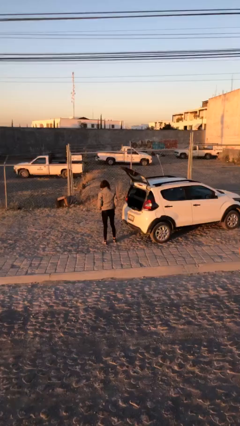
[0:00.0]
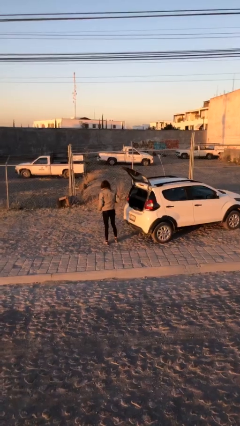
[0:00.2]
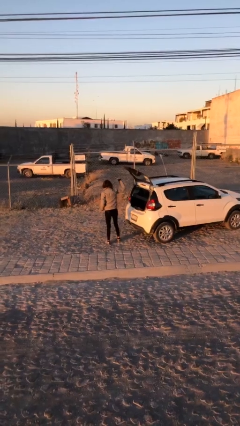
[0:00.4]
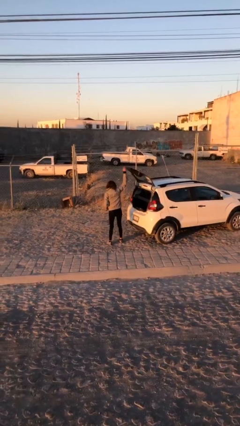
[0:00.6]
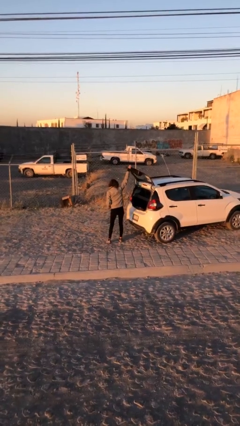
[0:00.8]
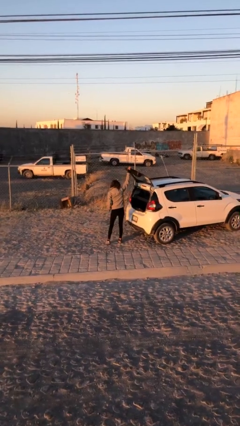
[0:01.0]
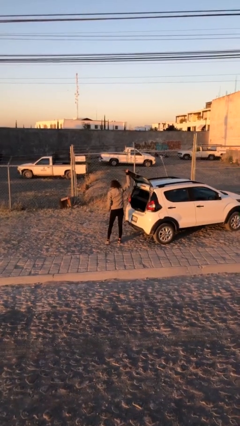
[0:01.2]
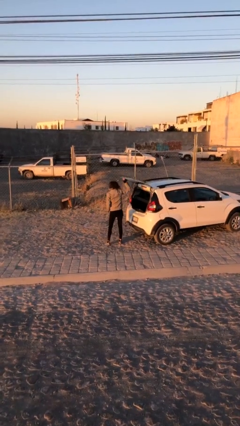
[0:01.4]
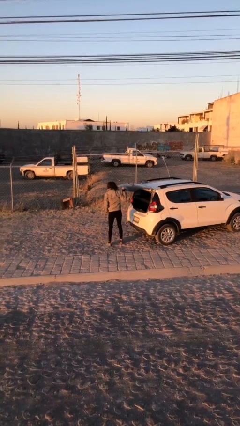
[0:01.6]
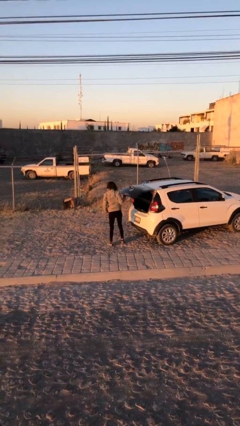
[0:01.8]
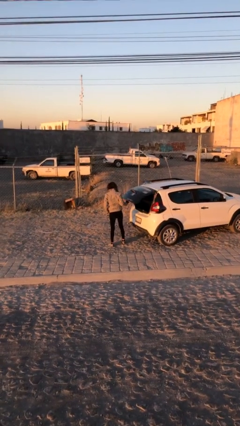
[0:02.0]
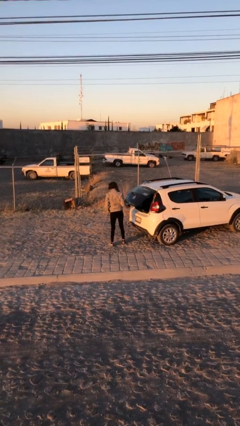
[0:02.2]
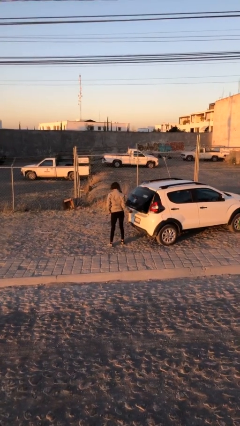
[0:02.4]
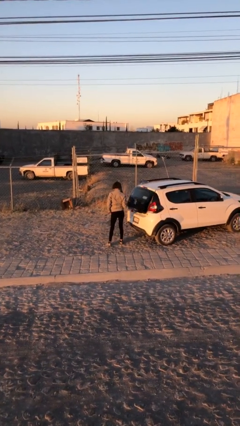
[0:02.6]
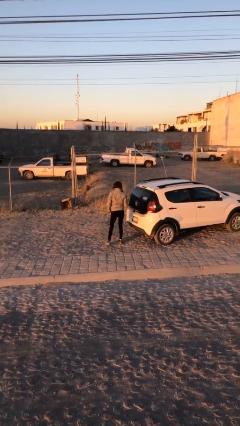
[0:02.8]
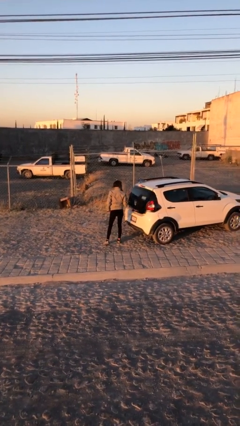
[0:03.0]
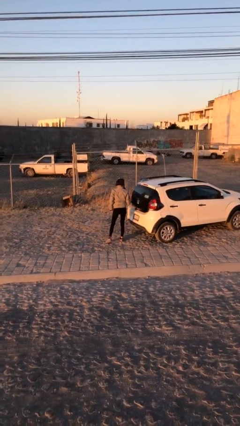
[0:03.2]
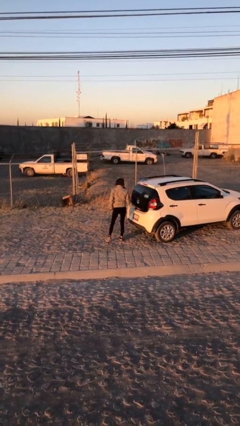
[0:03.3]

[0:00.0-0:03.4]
person closes car trunk

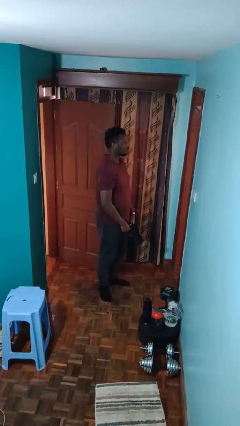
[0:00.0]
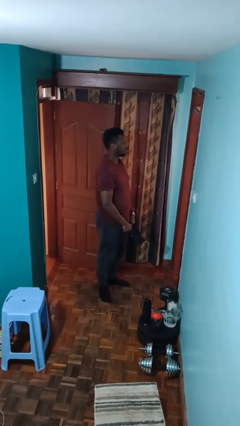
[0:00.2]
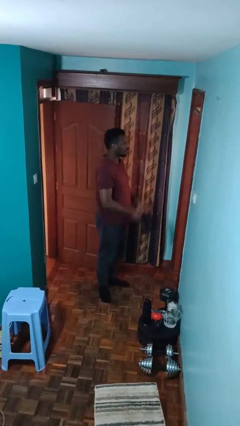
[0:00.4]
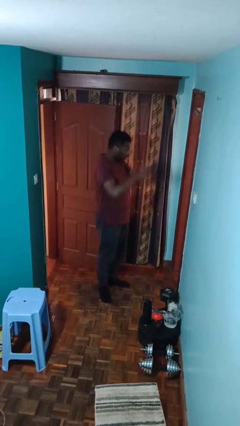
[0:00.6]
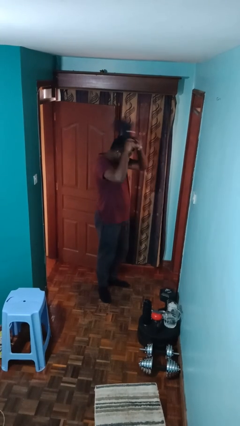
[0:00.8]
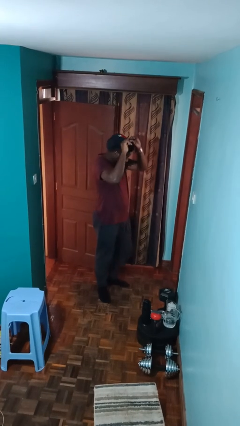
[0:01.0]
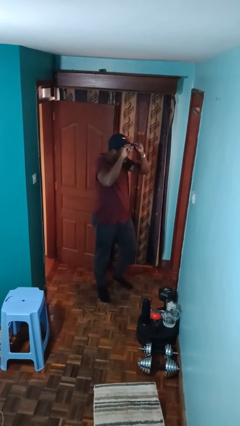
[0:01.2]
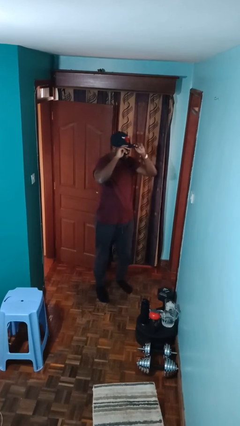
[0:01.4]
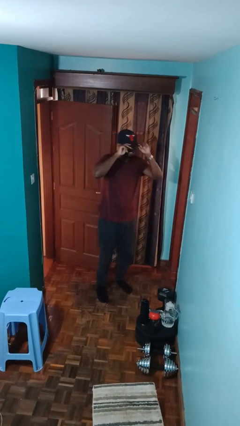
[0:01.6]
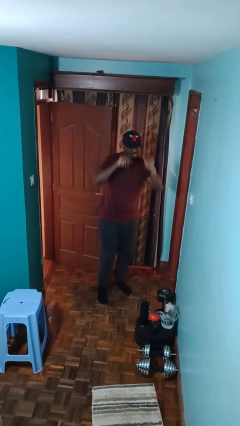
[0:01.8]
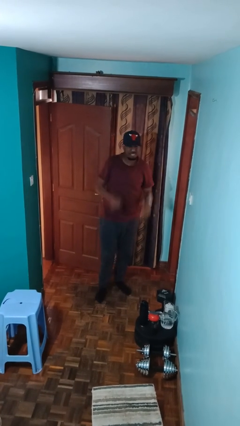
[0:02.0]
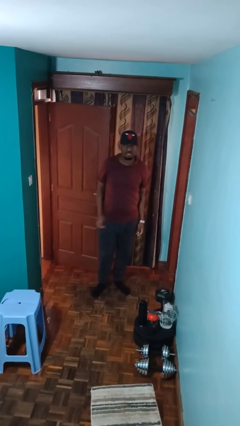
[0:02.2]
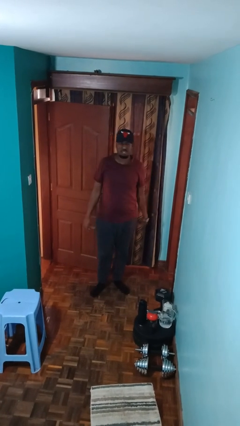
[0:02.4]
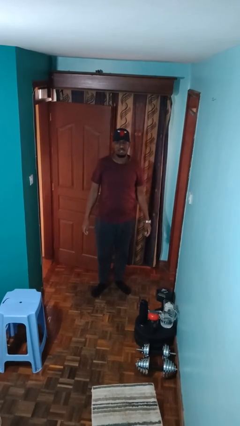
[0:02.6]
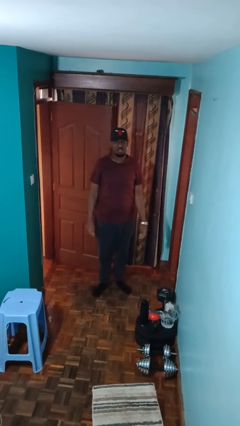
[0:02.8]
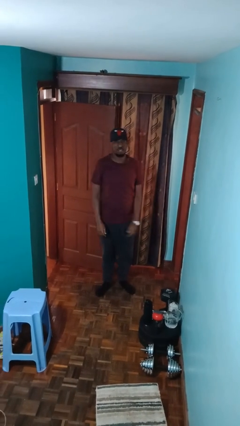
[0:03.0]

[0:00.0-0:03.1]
person puts on hat

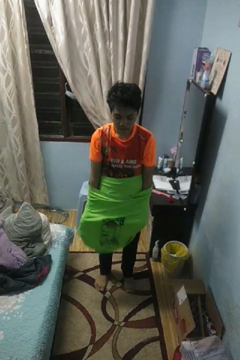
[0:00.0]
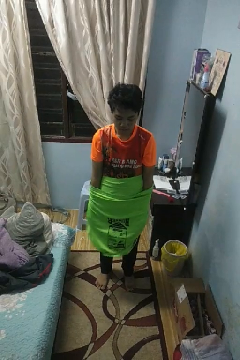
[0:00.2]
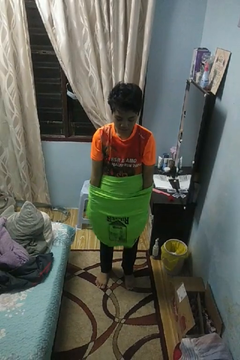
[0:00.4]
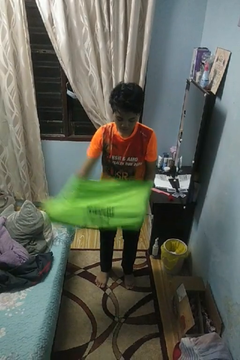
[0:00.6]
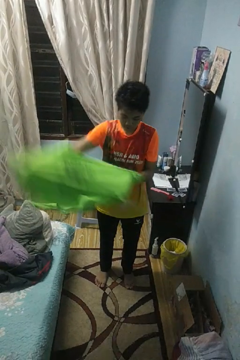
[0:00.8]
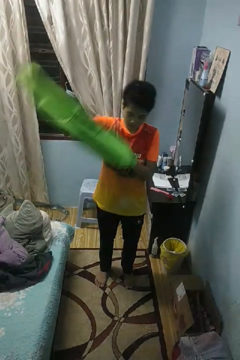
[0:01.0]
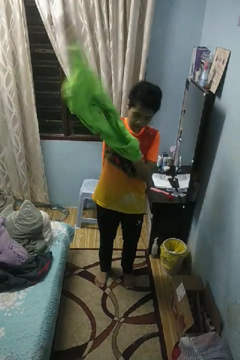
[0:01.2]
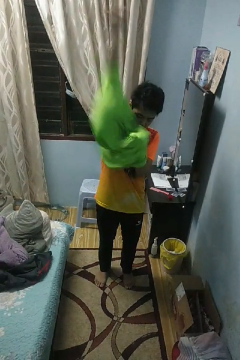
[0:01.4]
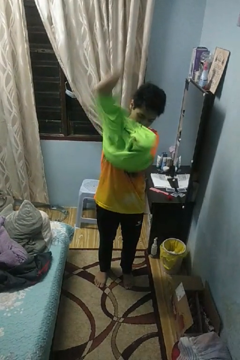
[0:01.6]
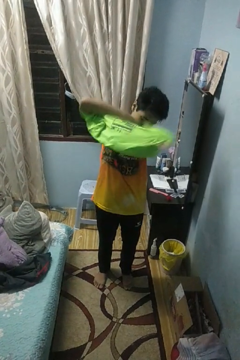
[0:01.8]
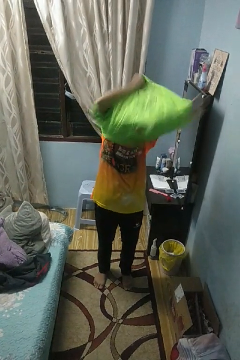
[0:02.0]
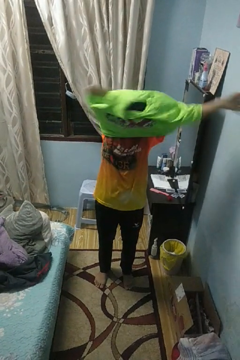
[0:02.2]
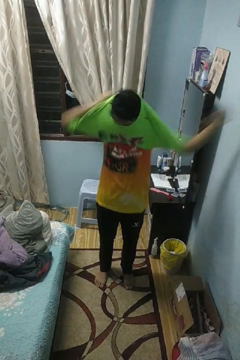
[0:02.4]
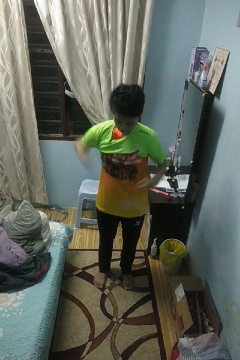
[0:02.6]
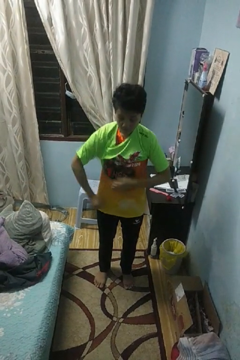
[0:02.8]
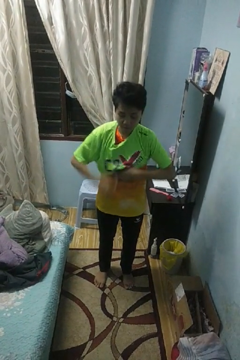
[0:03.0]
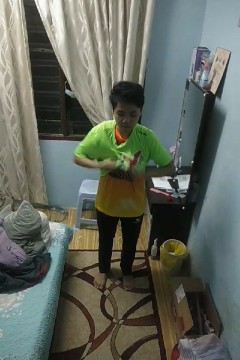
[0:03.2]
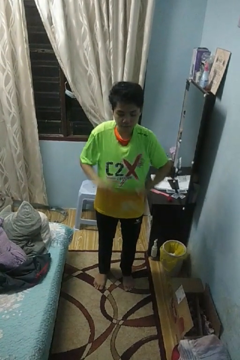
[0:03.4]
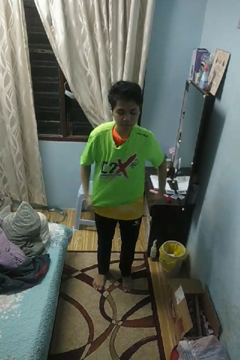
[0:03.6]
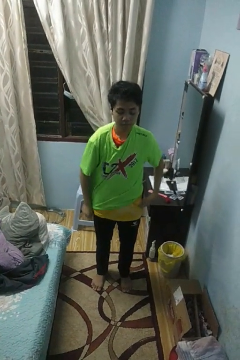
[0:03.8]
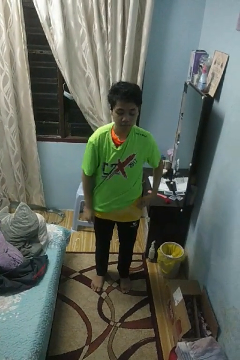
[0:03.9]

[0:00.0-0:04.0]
person puts on shirt

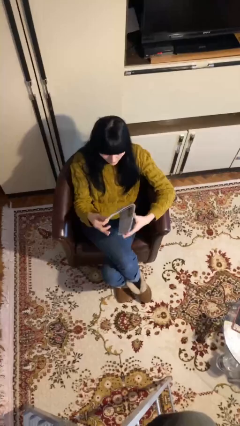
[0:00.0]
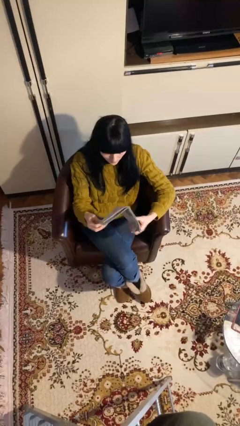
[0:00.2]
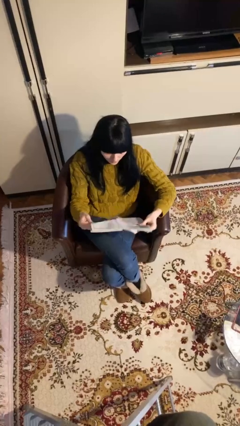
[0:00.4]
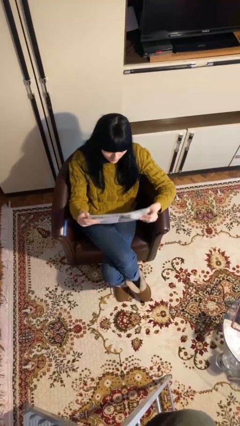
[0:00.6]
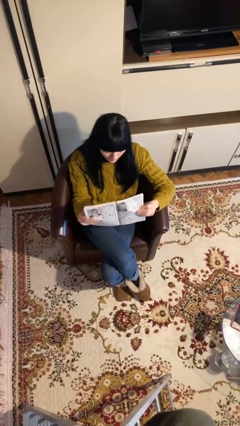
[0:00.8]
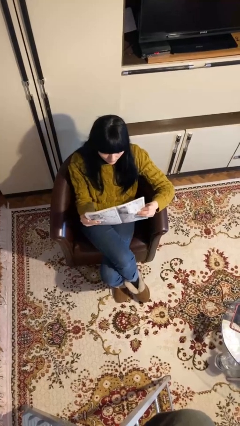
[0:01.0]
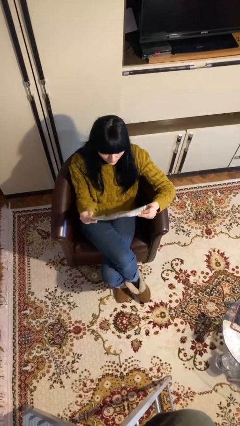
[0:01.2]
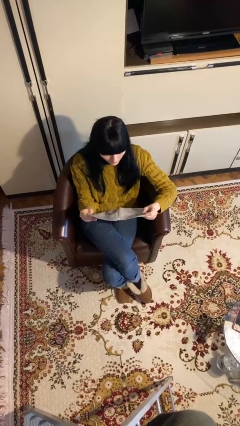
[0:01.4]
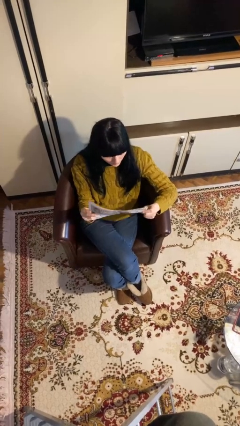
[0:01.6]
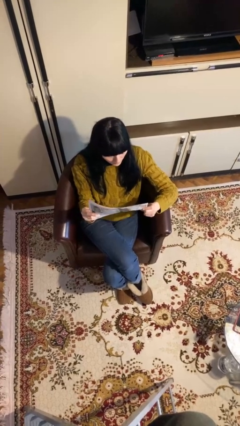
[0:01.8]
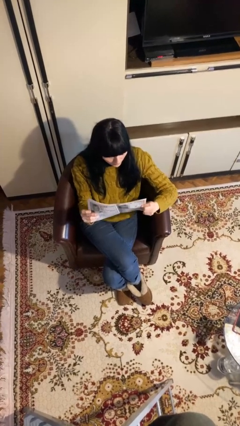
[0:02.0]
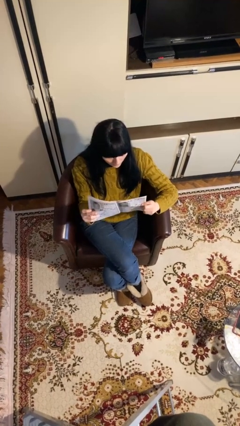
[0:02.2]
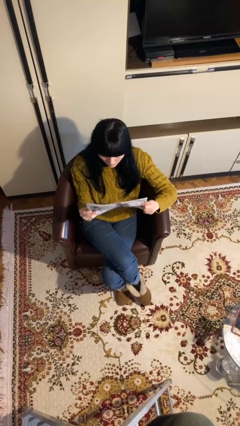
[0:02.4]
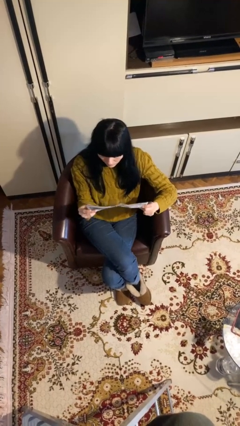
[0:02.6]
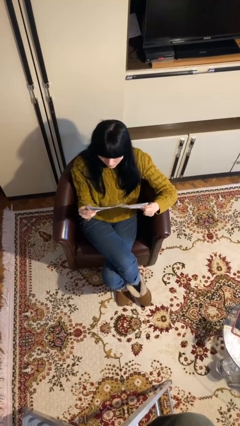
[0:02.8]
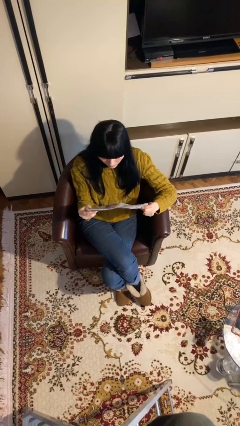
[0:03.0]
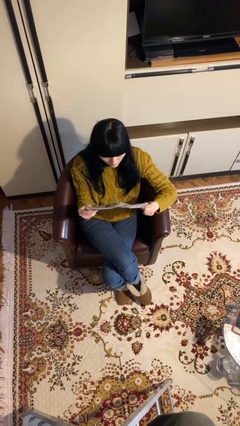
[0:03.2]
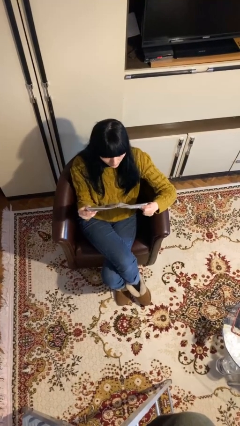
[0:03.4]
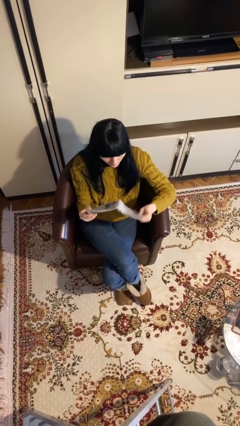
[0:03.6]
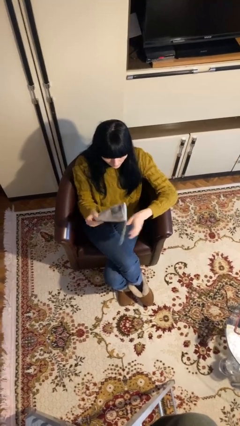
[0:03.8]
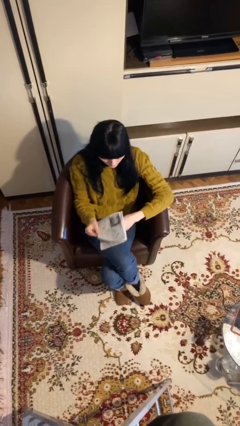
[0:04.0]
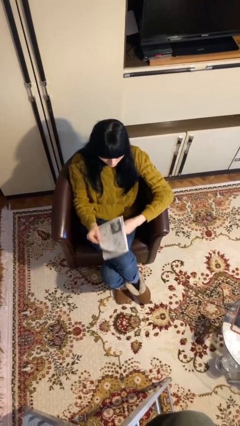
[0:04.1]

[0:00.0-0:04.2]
person reads document

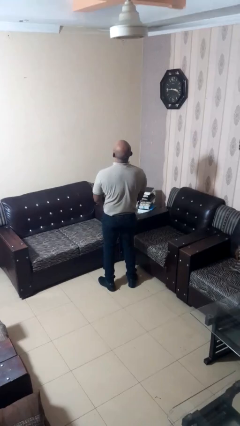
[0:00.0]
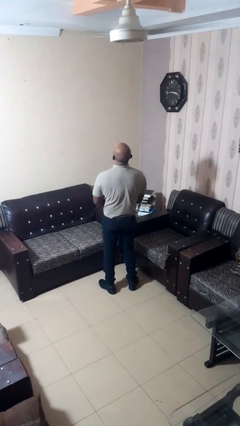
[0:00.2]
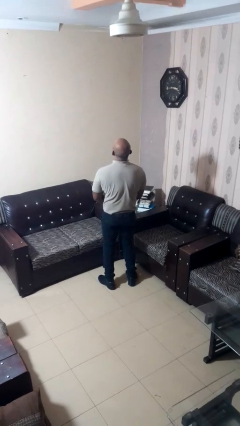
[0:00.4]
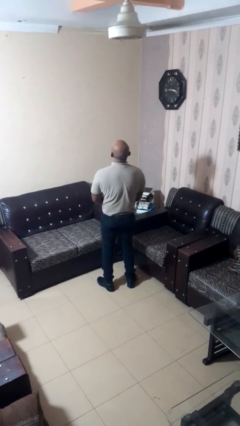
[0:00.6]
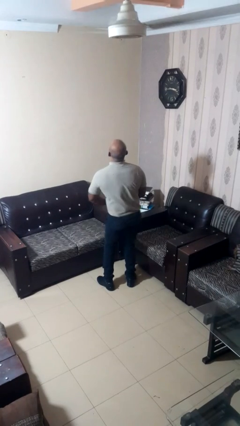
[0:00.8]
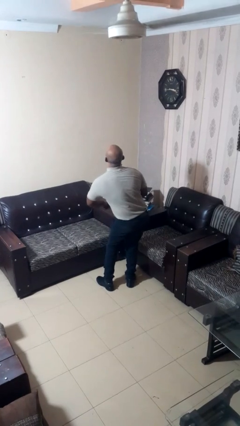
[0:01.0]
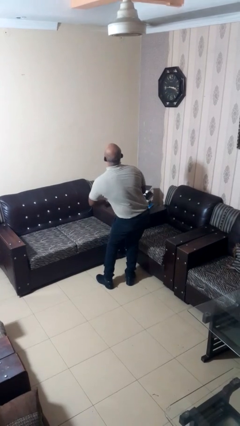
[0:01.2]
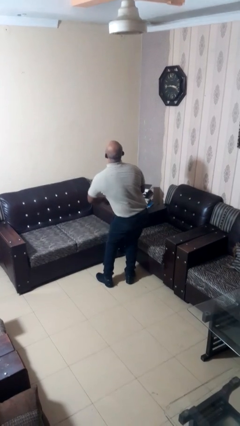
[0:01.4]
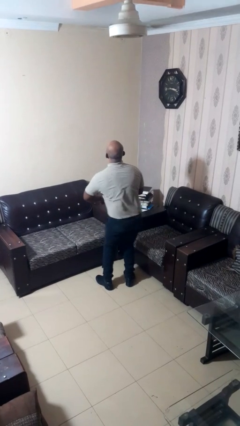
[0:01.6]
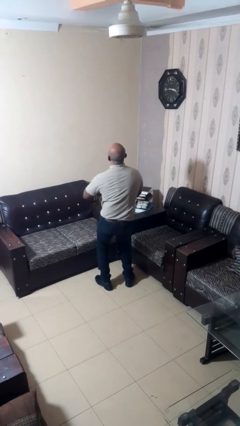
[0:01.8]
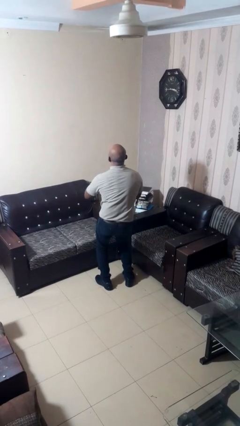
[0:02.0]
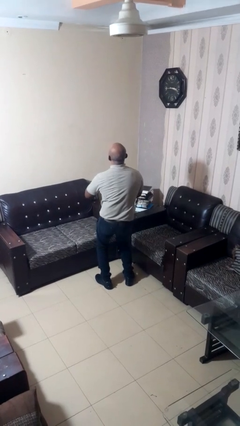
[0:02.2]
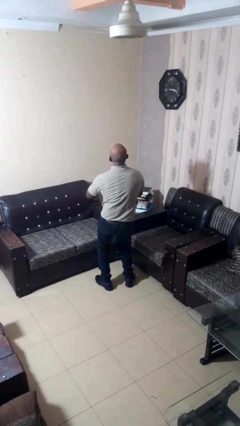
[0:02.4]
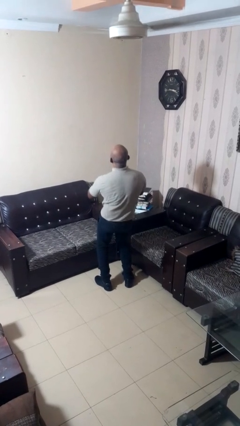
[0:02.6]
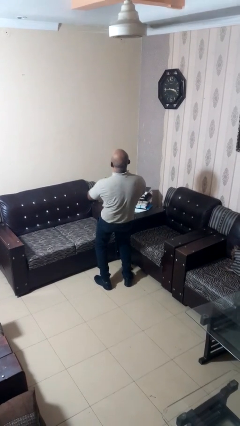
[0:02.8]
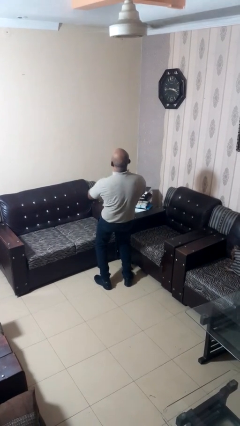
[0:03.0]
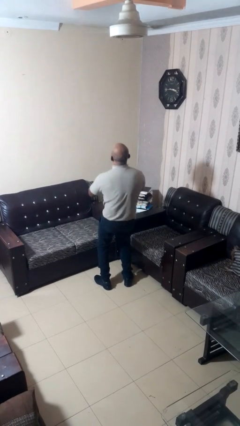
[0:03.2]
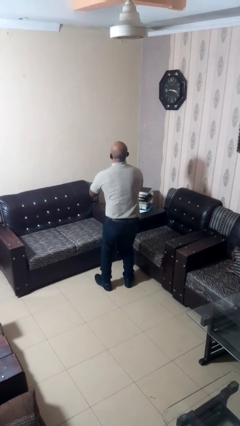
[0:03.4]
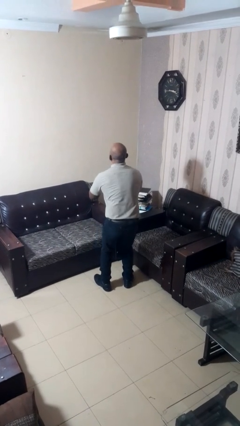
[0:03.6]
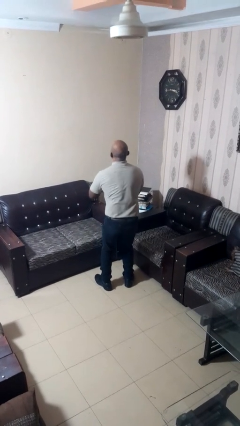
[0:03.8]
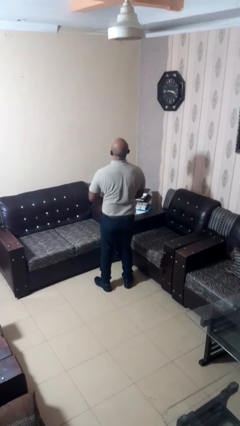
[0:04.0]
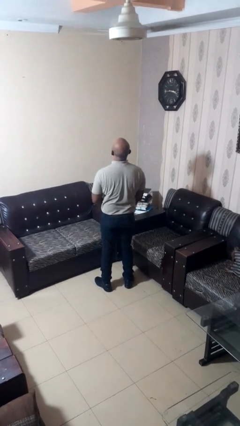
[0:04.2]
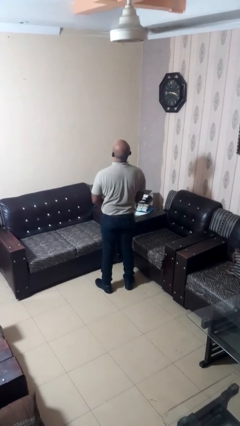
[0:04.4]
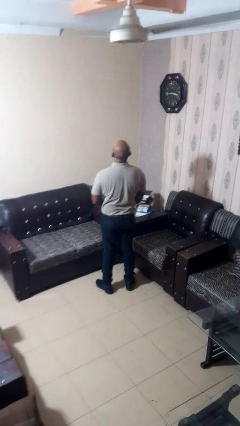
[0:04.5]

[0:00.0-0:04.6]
person wiggles hips
